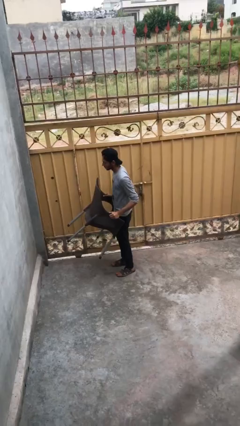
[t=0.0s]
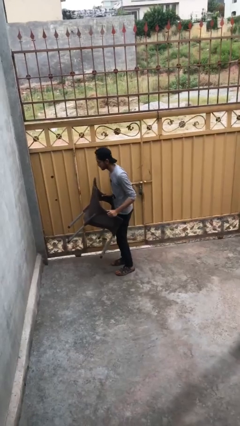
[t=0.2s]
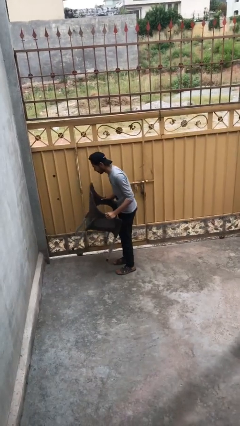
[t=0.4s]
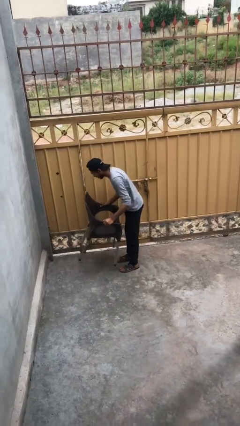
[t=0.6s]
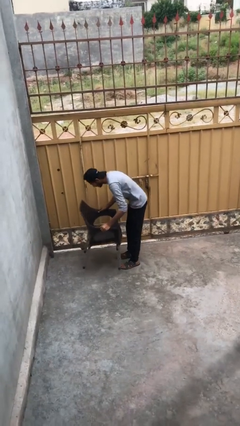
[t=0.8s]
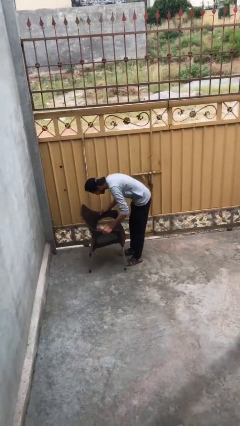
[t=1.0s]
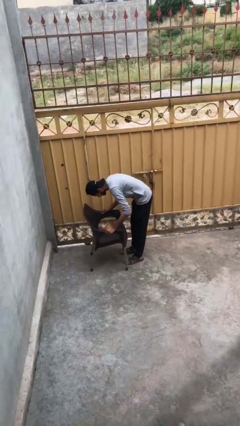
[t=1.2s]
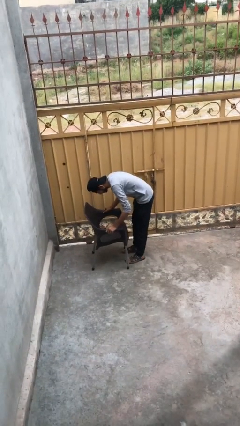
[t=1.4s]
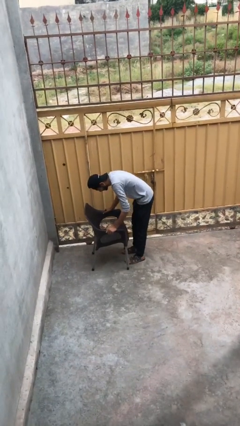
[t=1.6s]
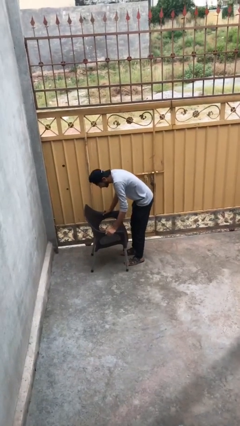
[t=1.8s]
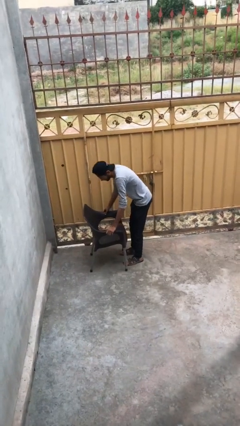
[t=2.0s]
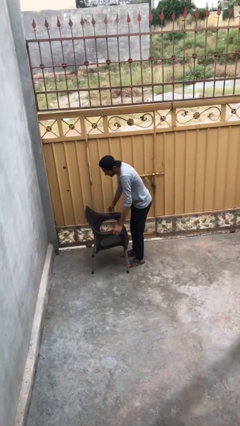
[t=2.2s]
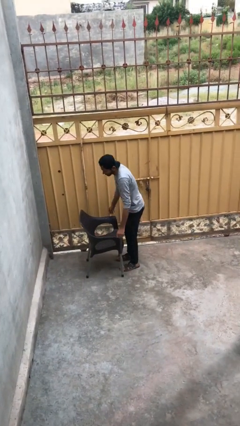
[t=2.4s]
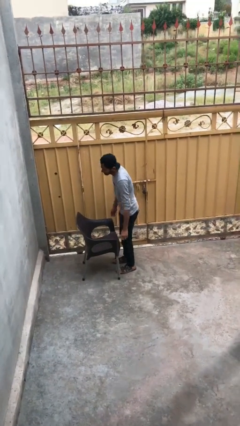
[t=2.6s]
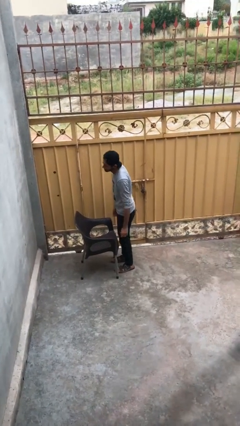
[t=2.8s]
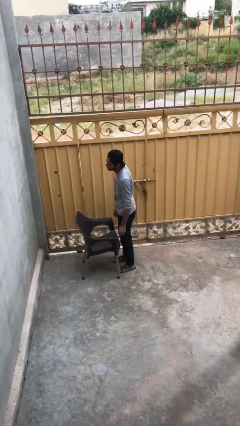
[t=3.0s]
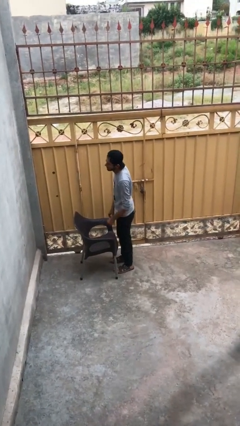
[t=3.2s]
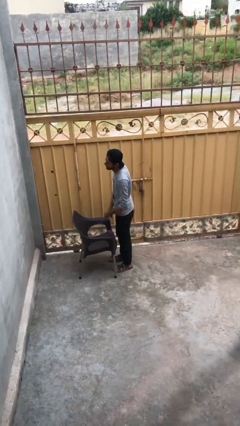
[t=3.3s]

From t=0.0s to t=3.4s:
person puts down object on floor

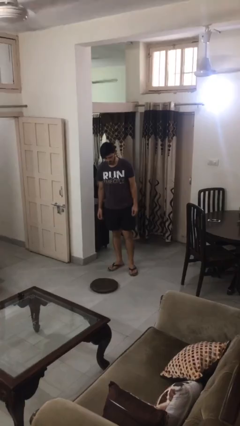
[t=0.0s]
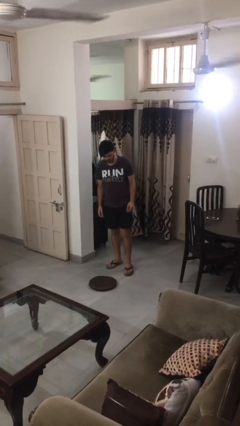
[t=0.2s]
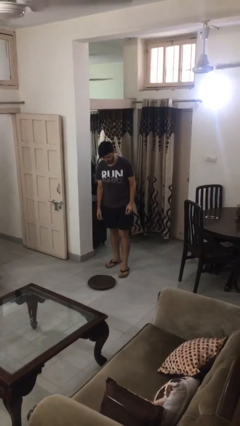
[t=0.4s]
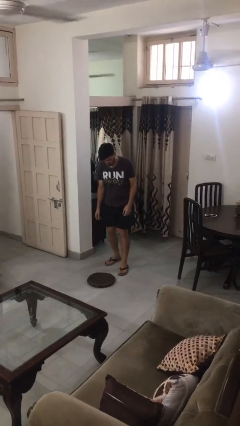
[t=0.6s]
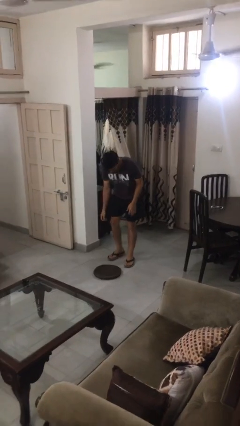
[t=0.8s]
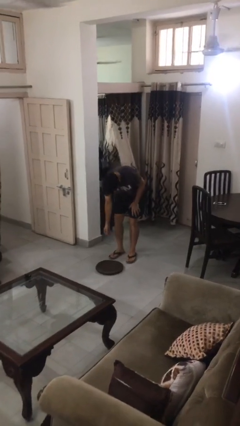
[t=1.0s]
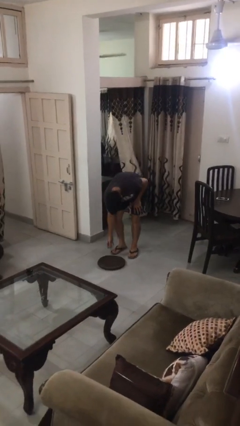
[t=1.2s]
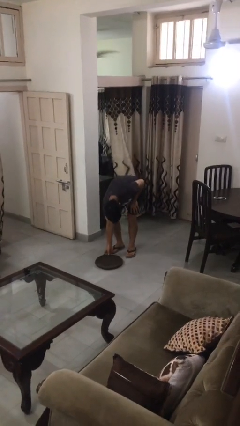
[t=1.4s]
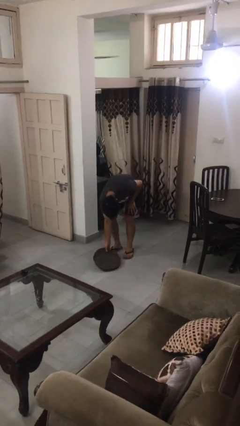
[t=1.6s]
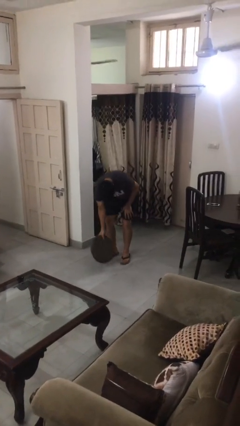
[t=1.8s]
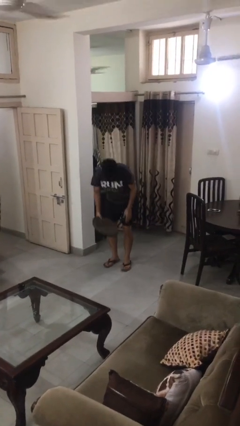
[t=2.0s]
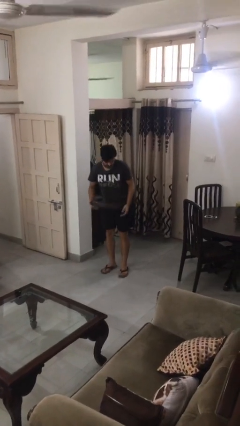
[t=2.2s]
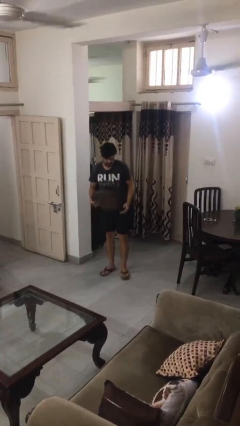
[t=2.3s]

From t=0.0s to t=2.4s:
person picks up object from floor

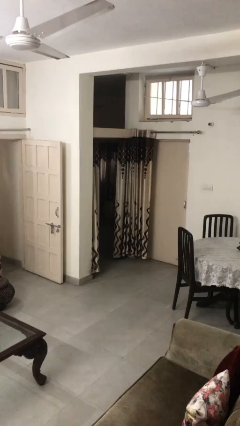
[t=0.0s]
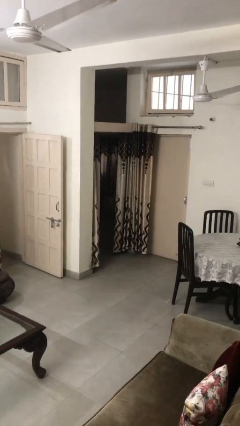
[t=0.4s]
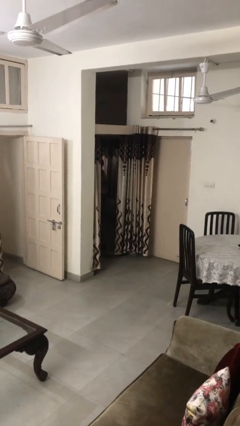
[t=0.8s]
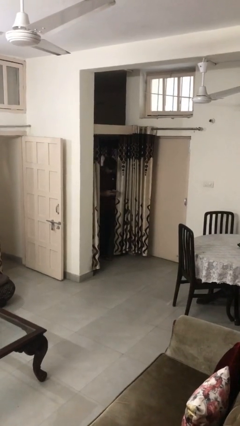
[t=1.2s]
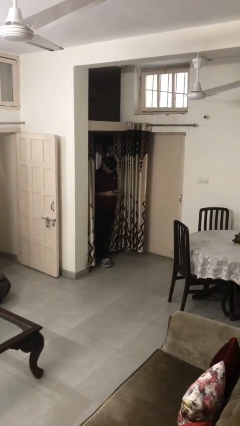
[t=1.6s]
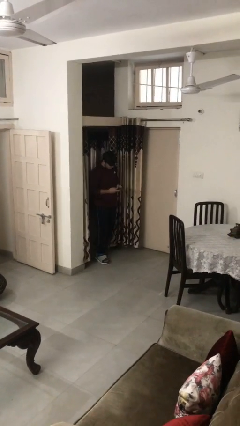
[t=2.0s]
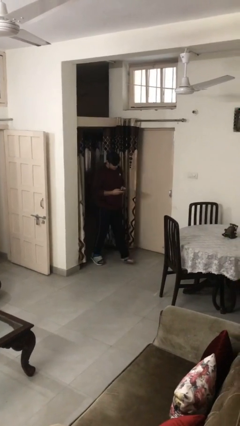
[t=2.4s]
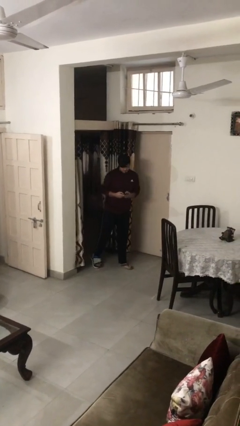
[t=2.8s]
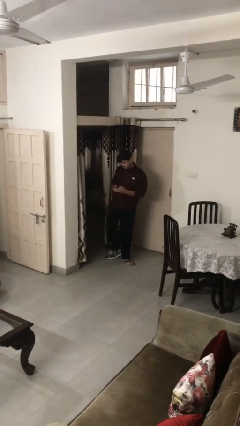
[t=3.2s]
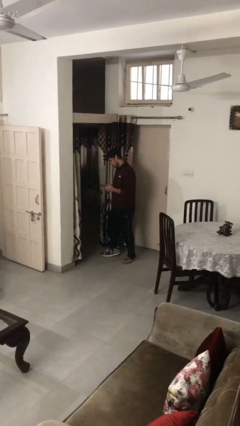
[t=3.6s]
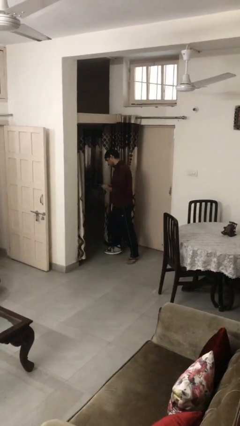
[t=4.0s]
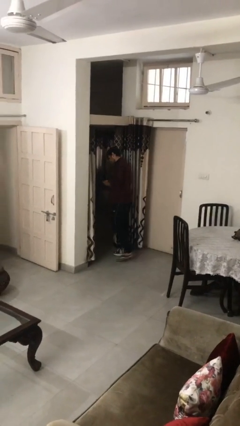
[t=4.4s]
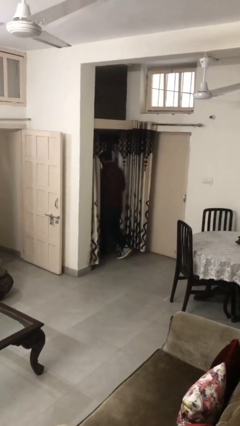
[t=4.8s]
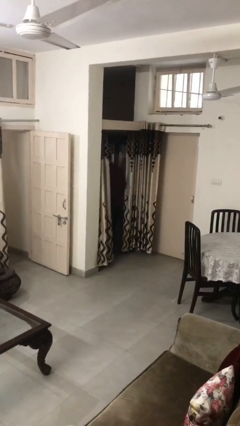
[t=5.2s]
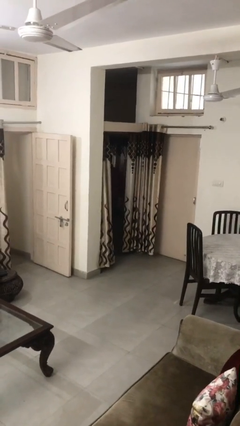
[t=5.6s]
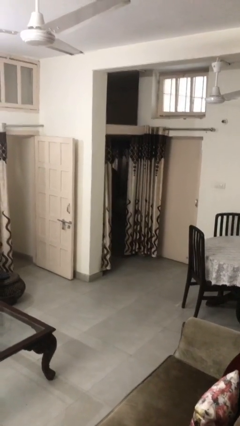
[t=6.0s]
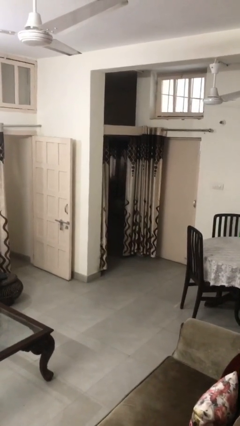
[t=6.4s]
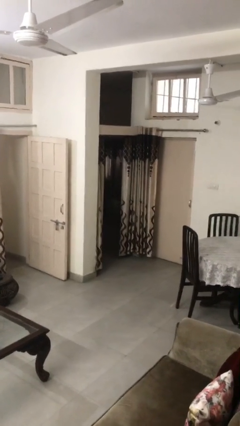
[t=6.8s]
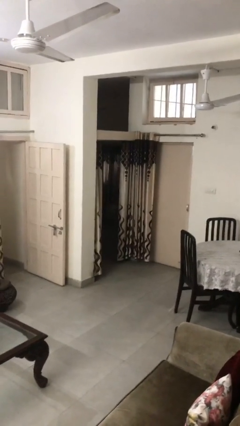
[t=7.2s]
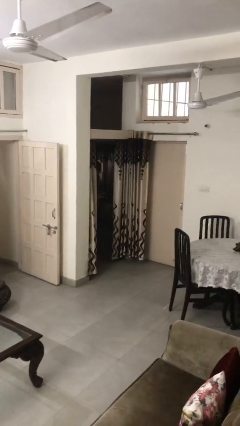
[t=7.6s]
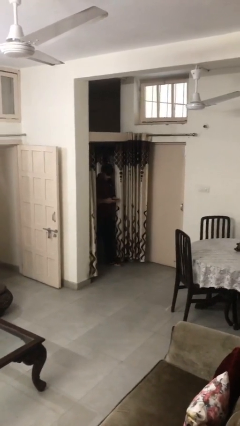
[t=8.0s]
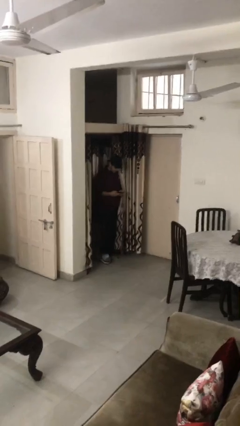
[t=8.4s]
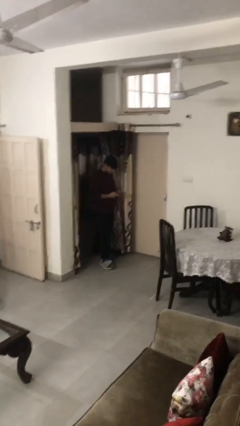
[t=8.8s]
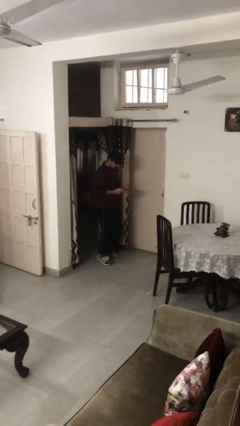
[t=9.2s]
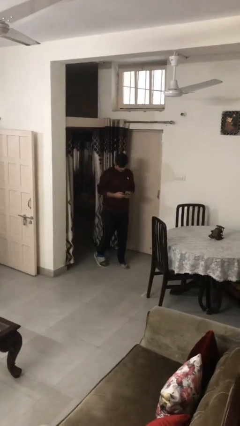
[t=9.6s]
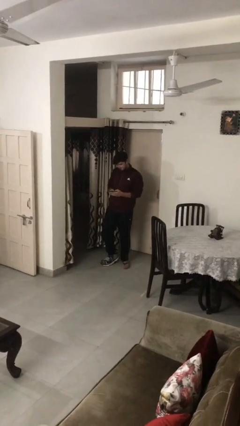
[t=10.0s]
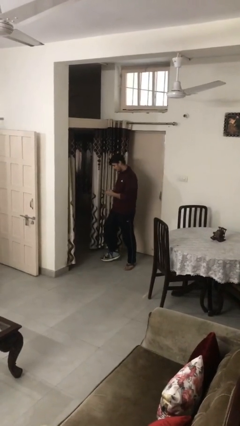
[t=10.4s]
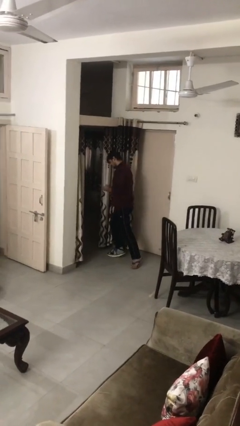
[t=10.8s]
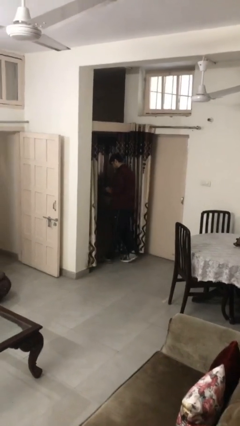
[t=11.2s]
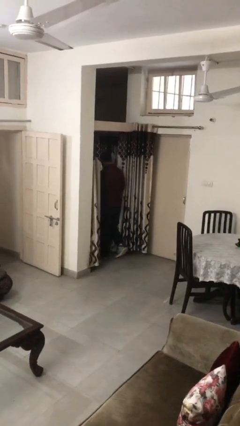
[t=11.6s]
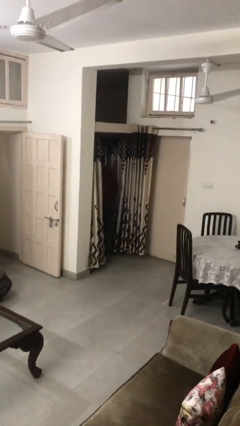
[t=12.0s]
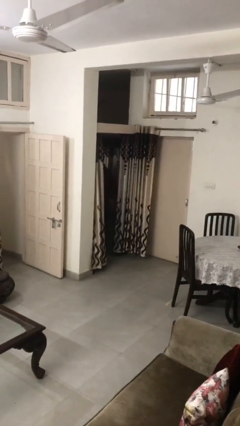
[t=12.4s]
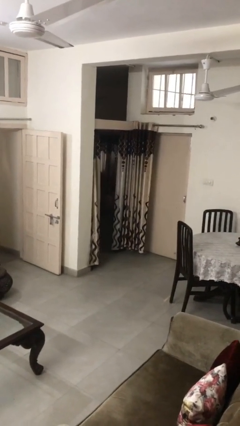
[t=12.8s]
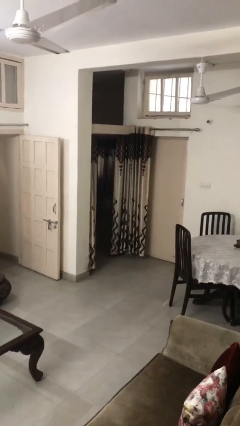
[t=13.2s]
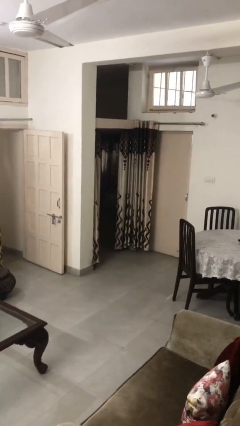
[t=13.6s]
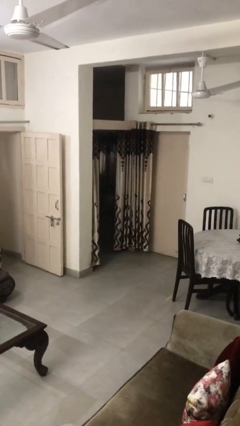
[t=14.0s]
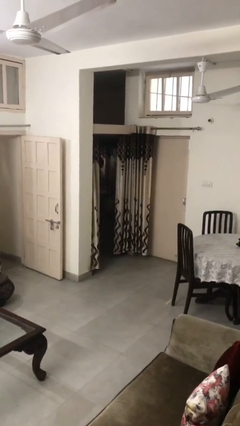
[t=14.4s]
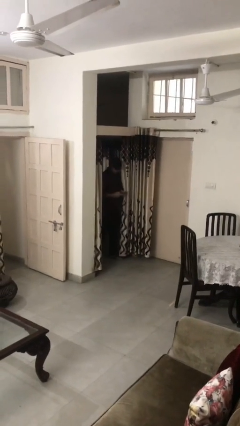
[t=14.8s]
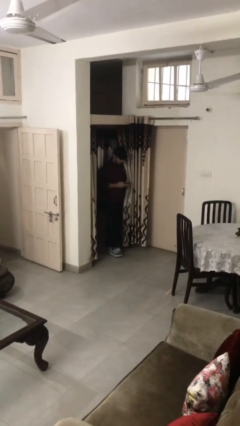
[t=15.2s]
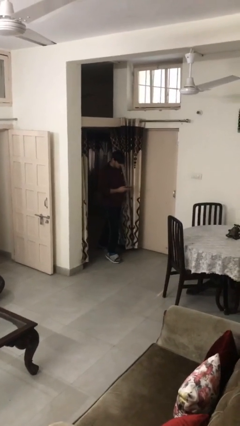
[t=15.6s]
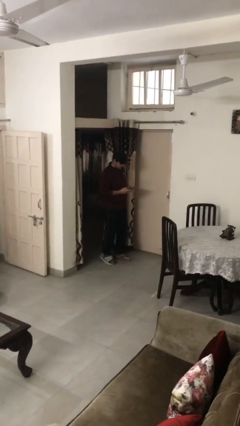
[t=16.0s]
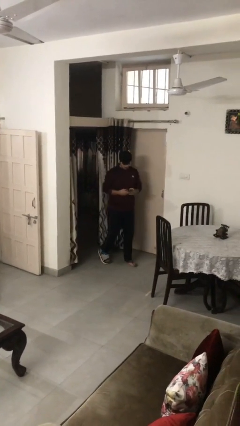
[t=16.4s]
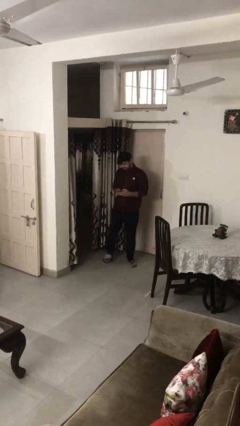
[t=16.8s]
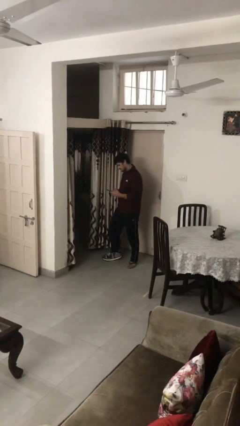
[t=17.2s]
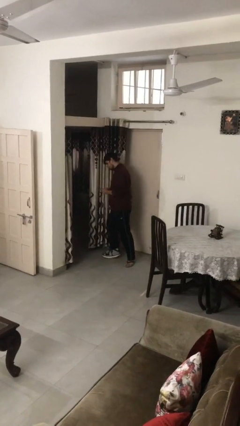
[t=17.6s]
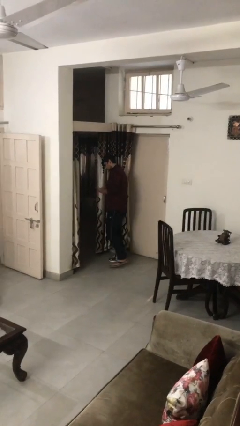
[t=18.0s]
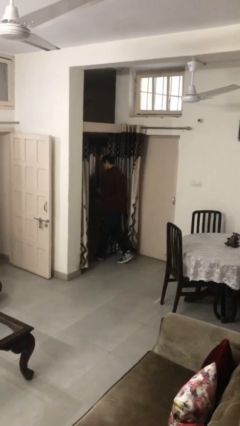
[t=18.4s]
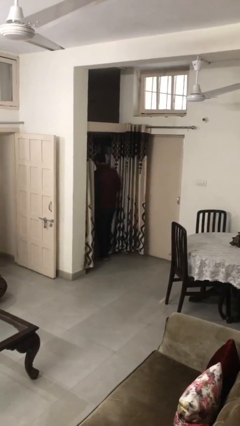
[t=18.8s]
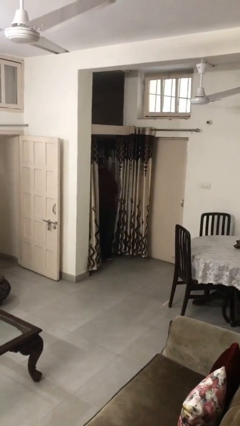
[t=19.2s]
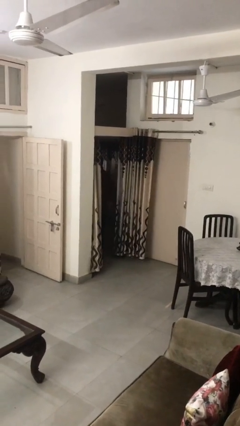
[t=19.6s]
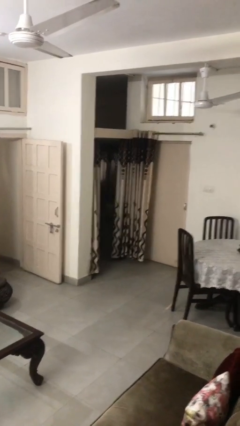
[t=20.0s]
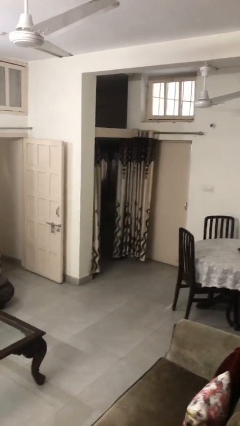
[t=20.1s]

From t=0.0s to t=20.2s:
person texts on phone

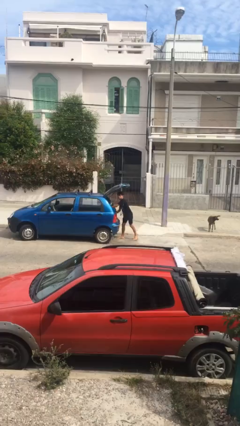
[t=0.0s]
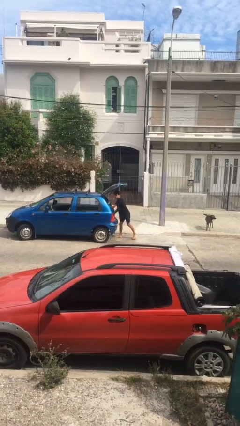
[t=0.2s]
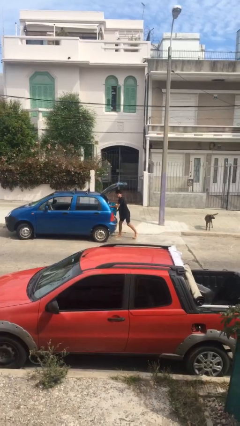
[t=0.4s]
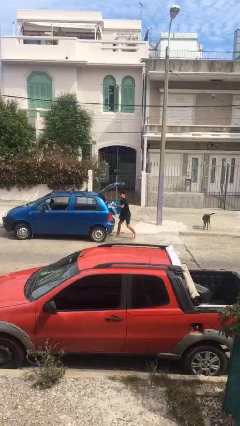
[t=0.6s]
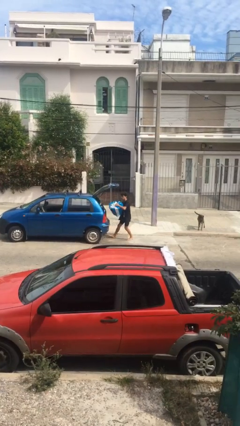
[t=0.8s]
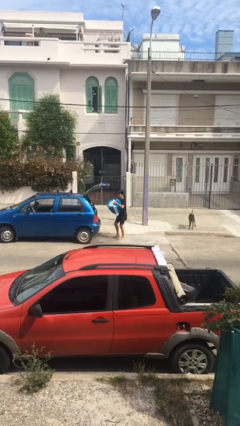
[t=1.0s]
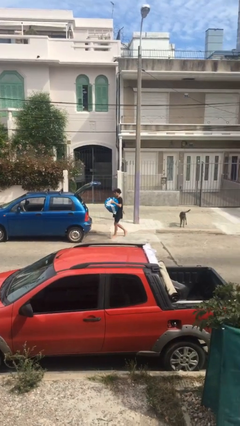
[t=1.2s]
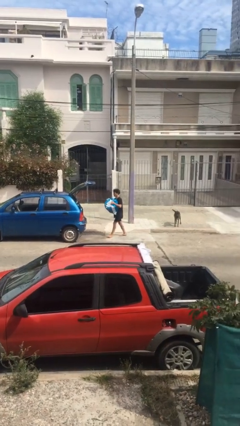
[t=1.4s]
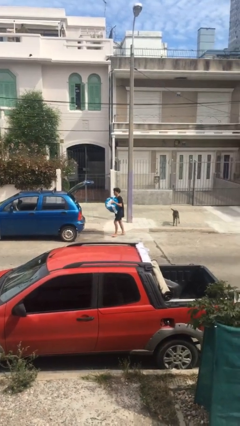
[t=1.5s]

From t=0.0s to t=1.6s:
person unloads car
